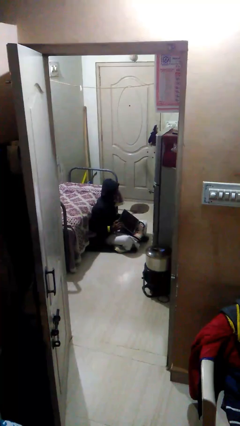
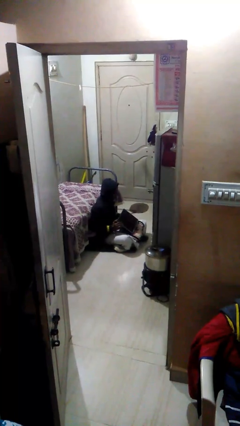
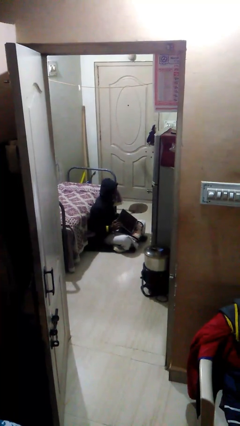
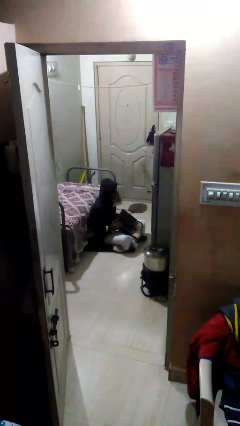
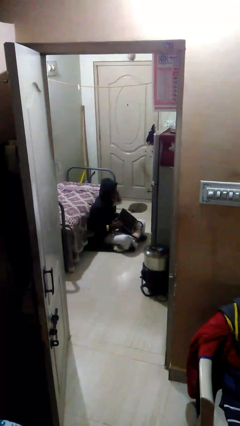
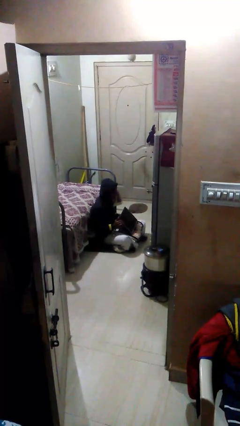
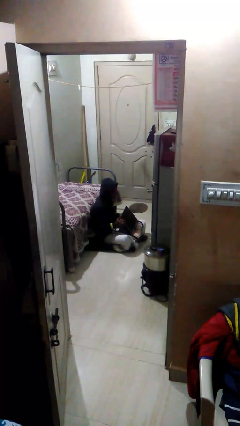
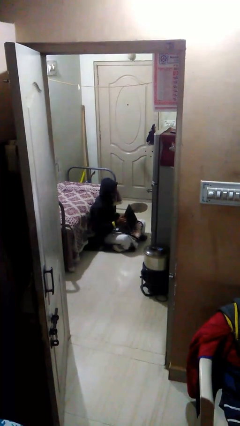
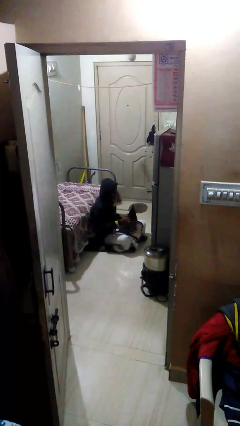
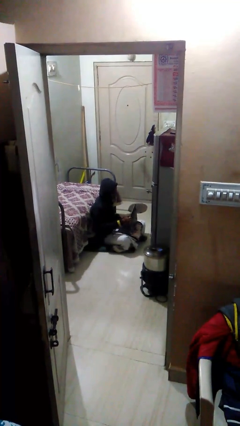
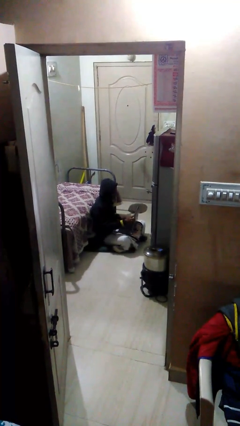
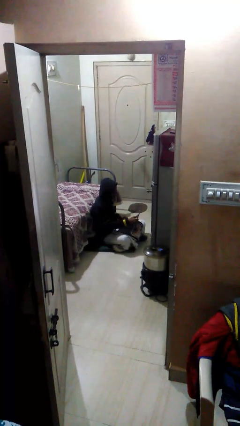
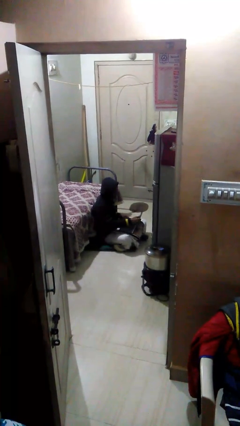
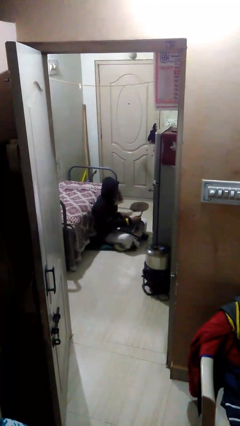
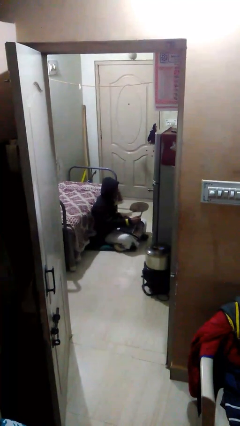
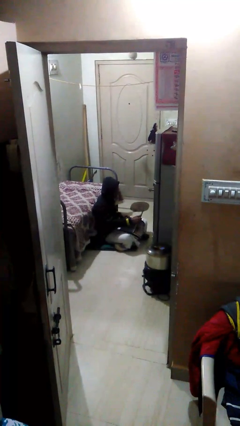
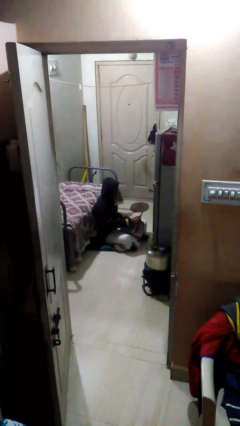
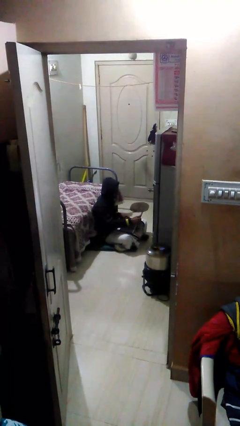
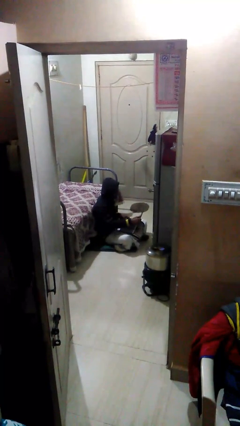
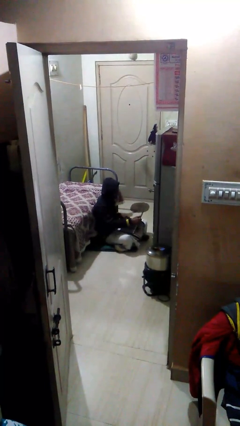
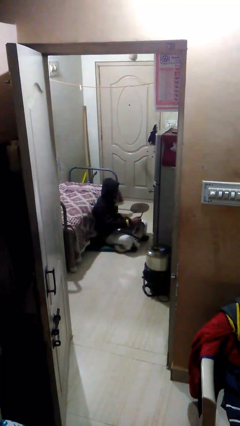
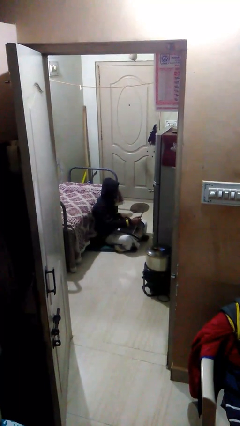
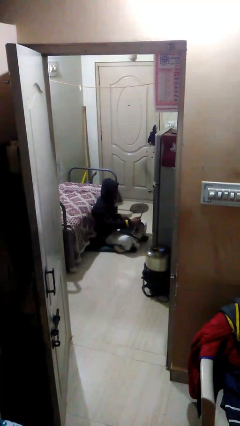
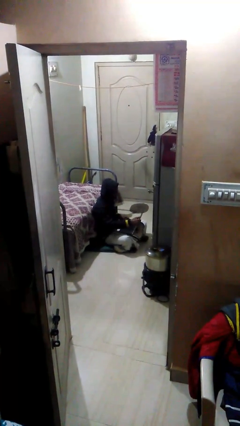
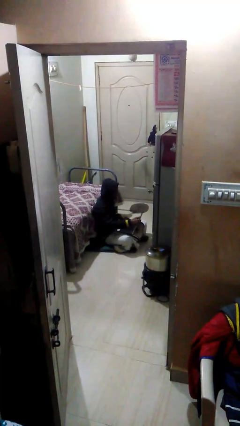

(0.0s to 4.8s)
person interacts with laptop

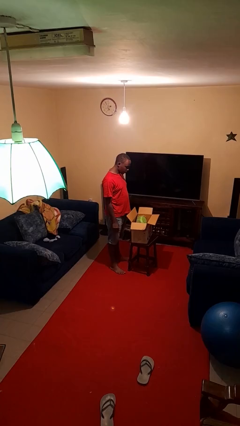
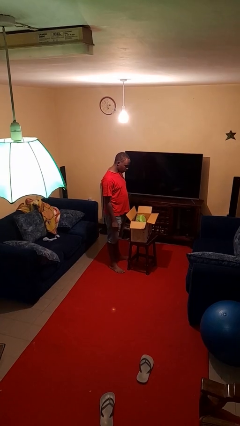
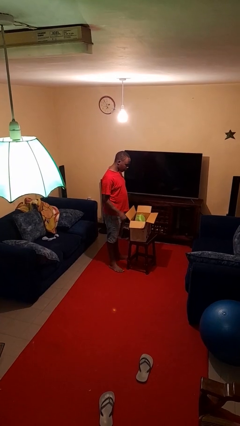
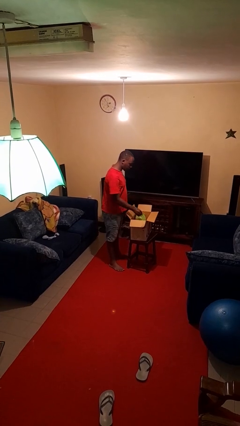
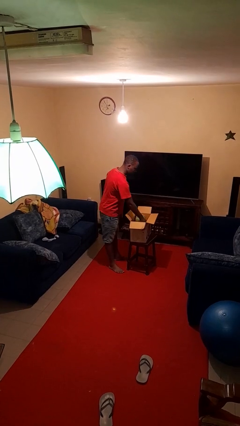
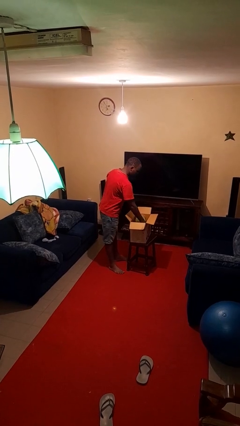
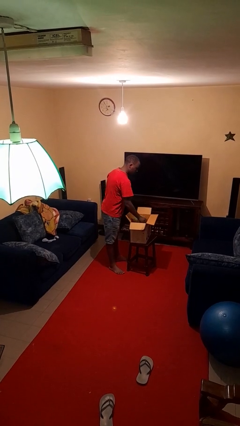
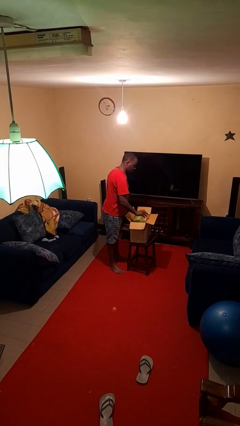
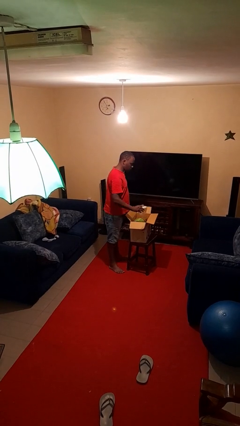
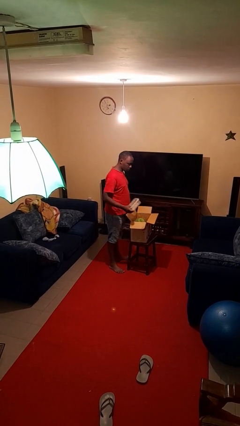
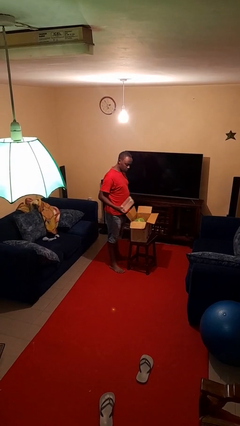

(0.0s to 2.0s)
person takes object from box

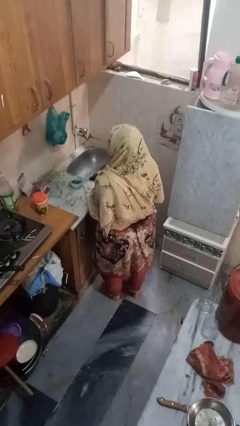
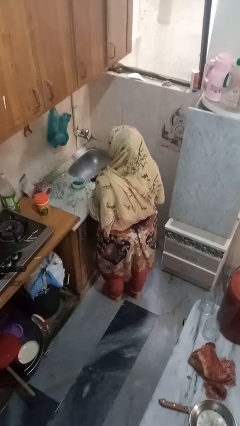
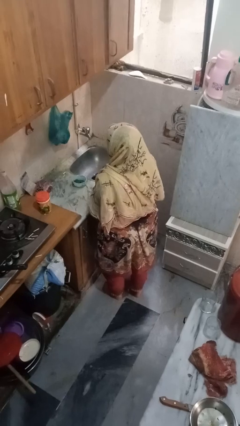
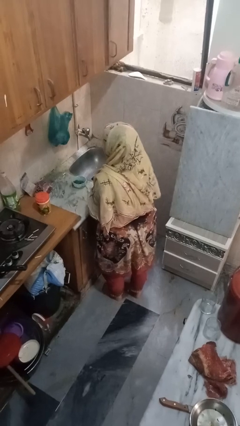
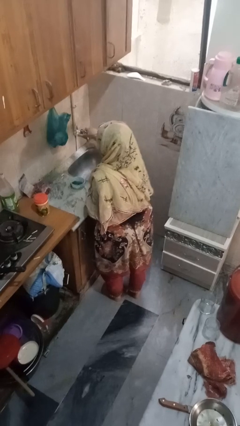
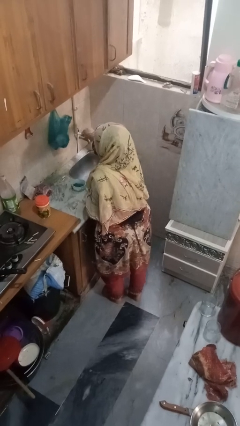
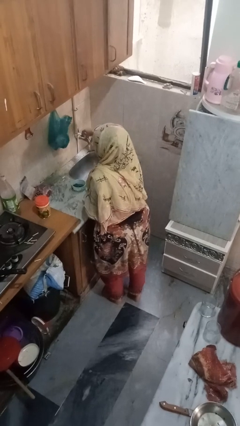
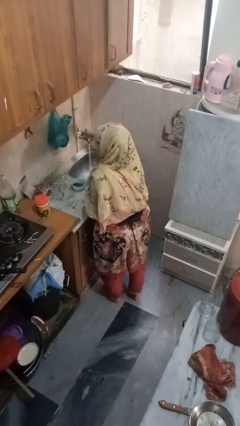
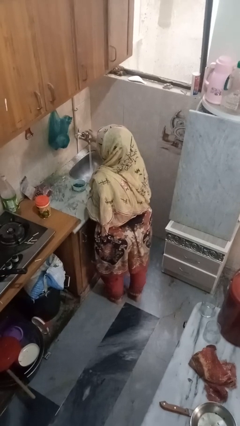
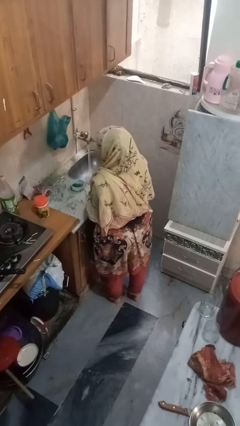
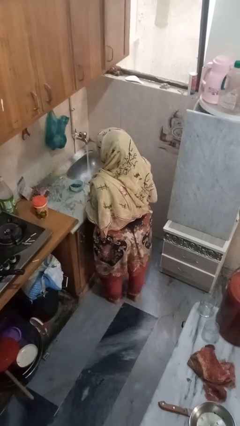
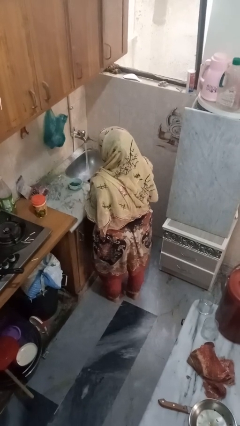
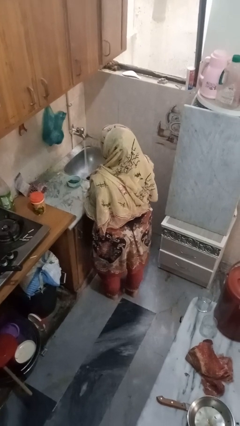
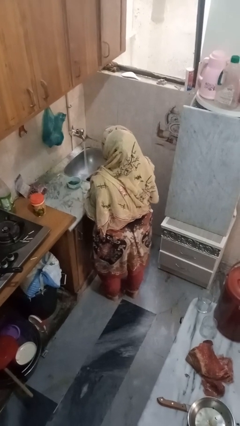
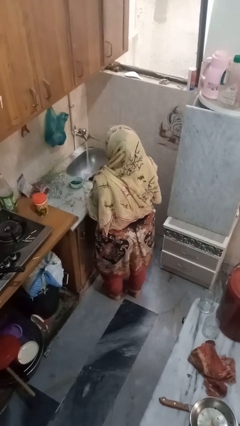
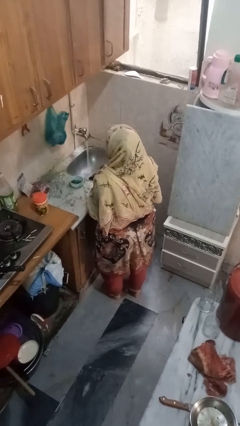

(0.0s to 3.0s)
person turns on faucet

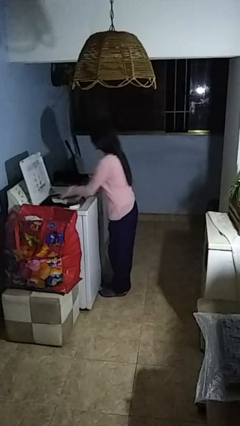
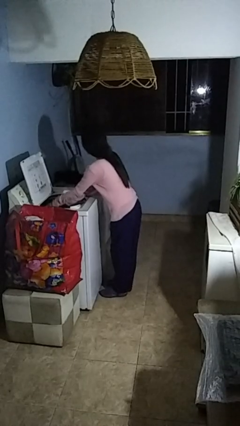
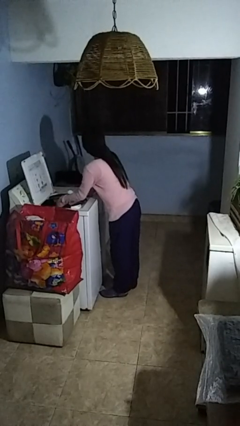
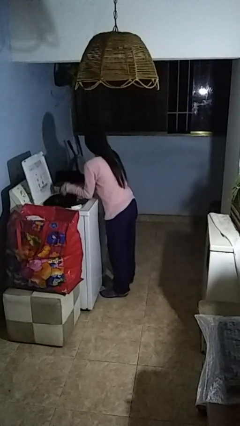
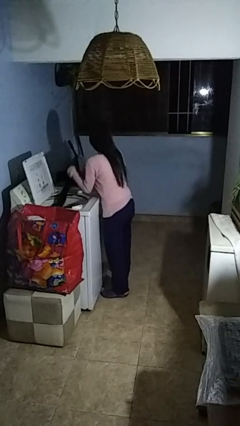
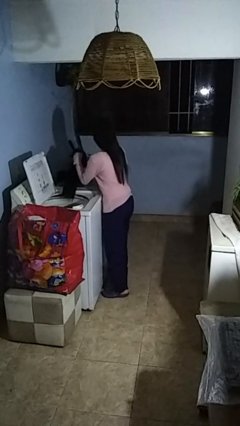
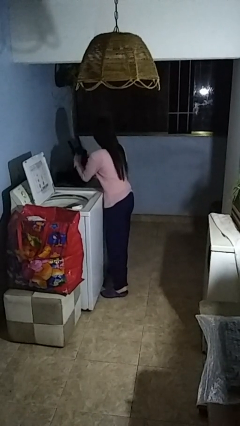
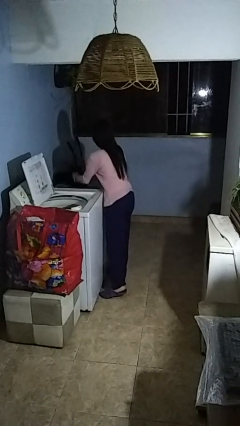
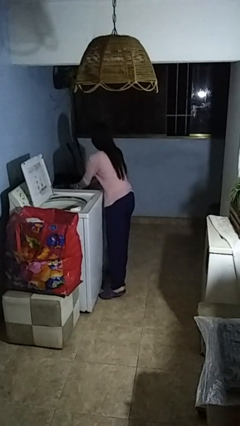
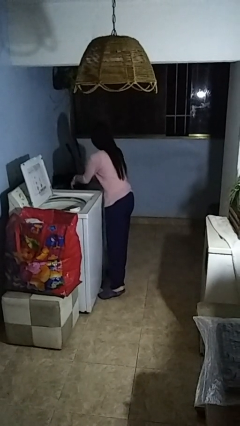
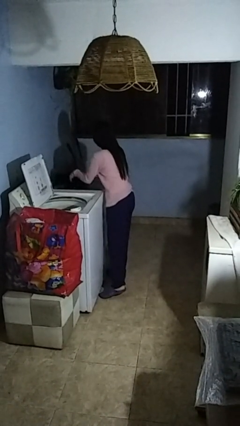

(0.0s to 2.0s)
person loads clotheswasher

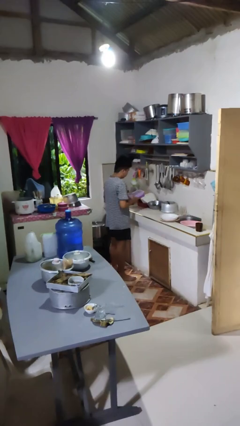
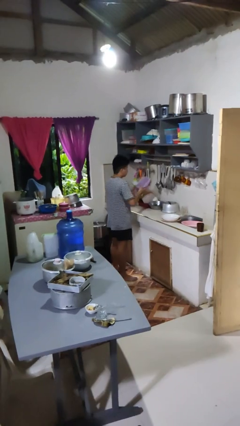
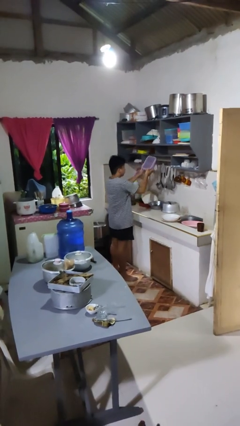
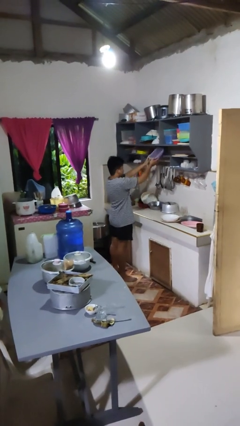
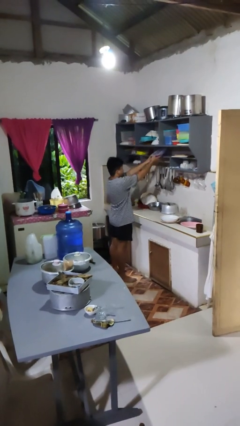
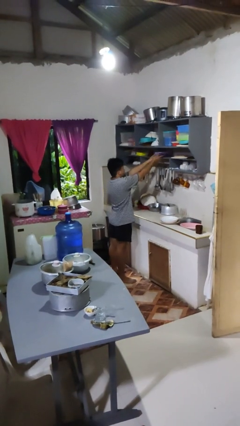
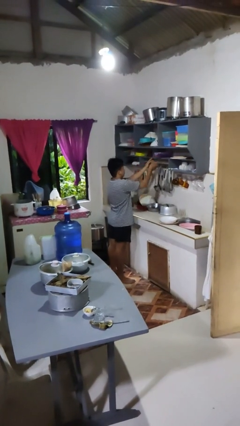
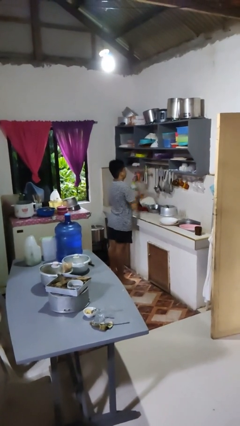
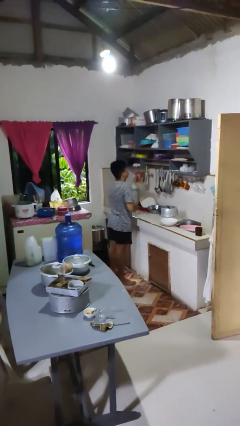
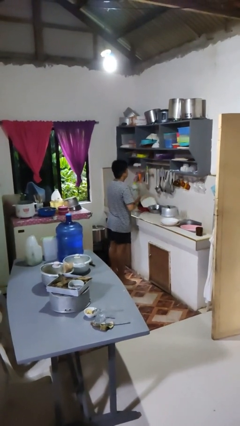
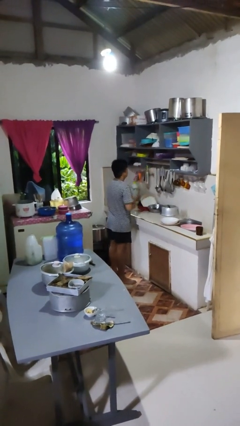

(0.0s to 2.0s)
person puts down object into cabinet

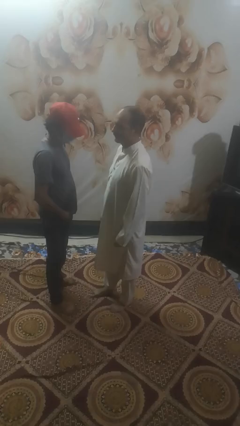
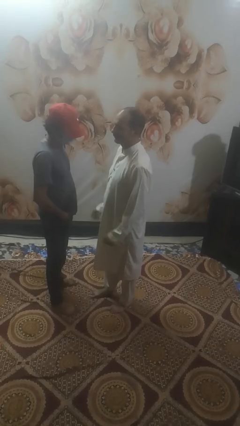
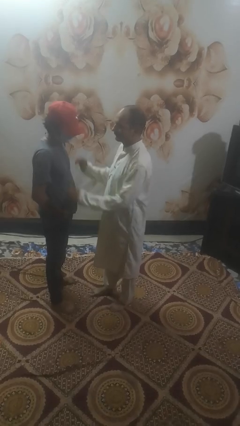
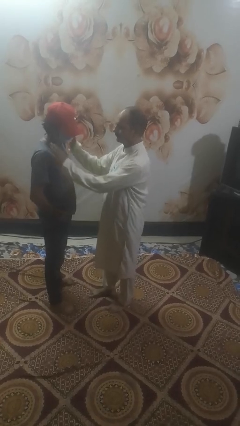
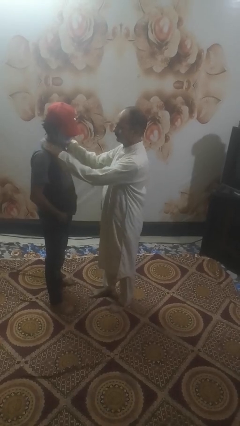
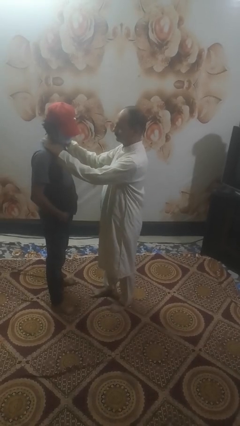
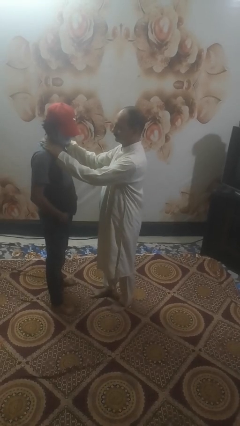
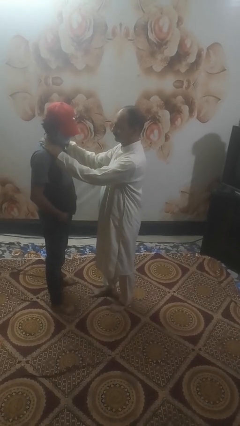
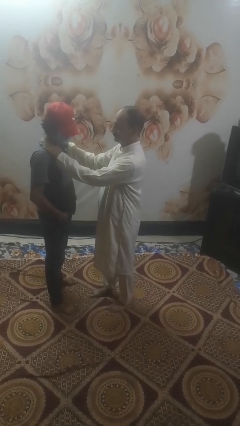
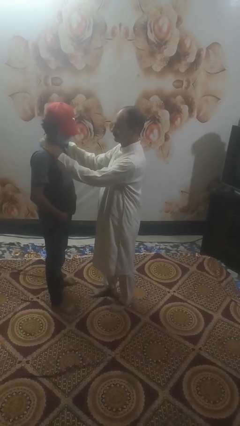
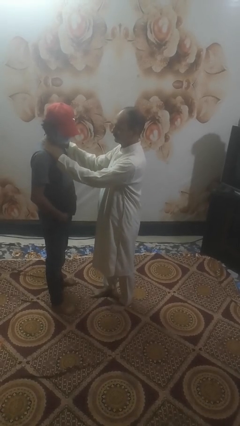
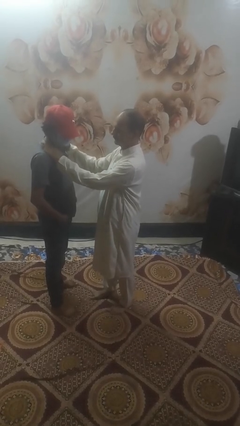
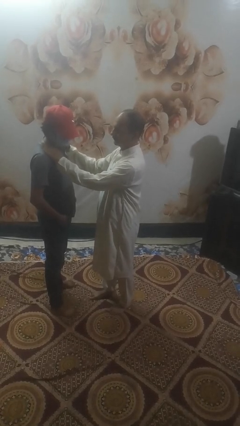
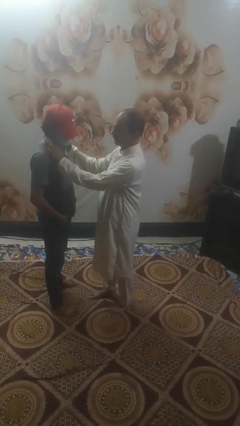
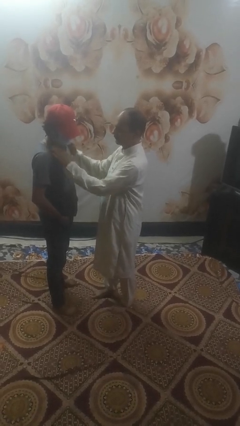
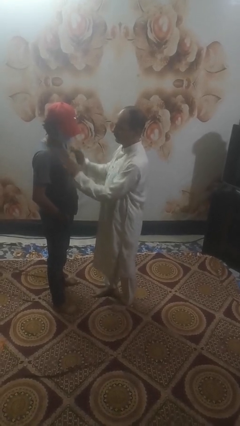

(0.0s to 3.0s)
person pounds shoulders of person

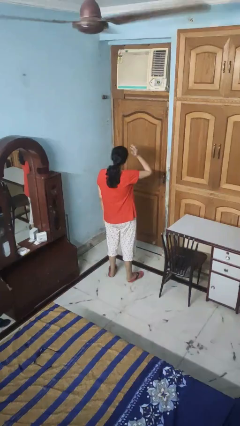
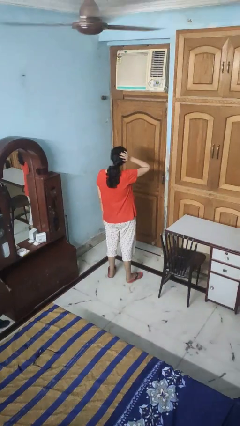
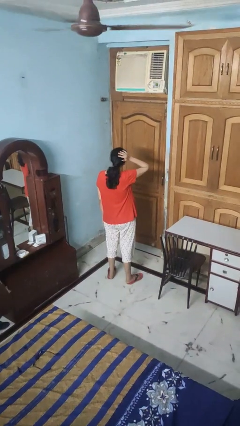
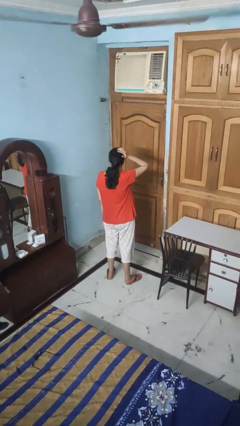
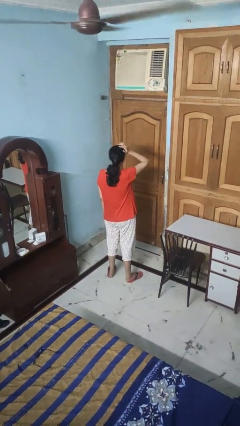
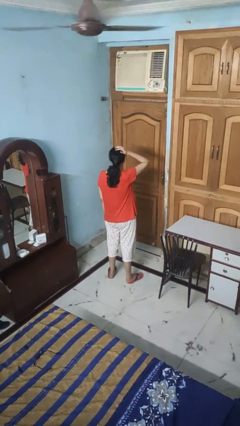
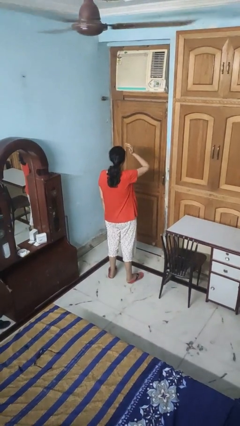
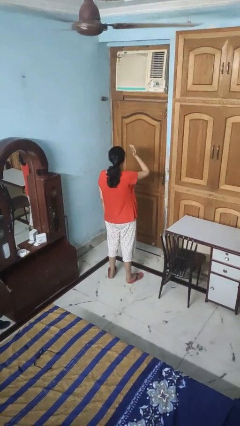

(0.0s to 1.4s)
person pats head
